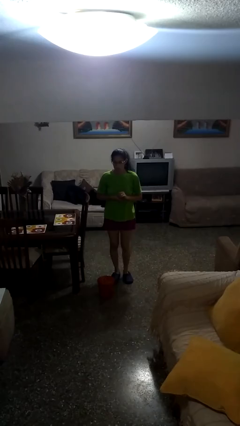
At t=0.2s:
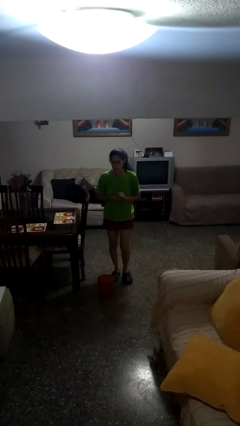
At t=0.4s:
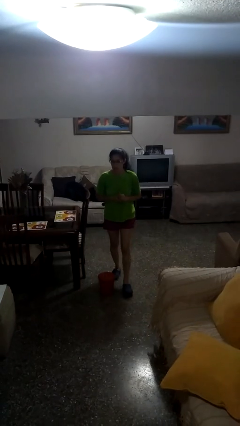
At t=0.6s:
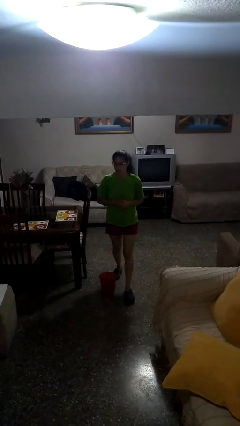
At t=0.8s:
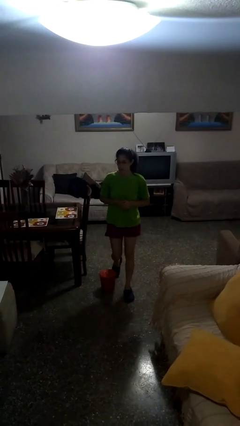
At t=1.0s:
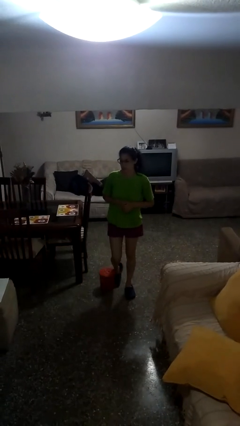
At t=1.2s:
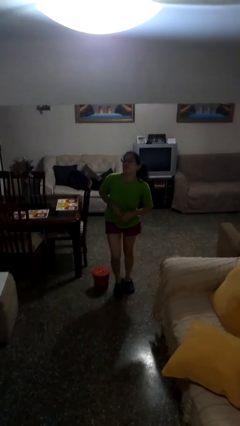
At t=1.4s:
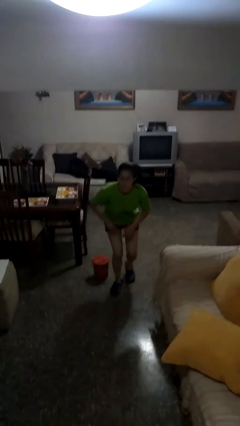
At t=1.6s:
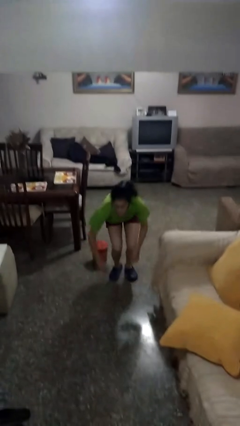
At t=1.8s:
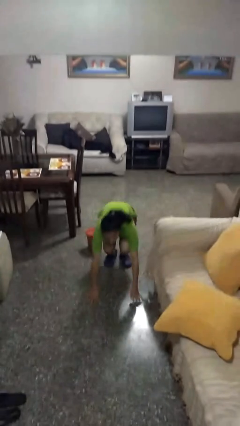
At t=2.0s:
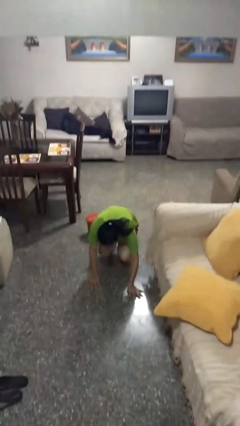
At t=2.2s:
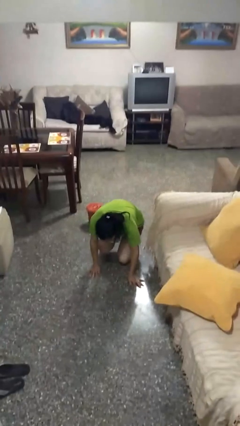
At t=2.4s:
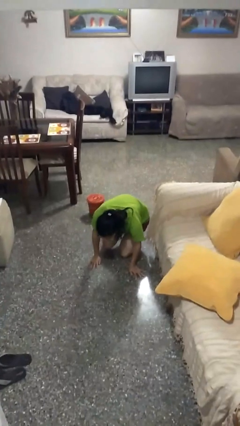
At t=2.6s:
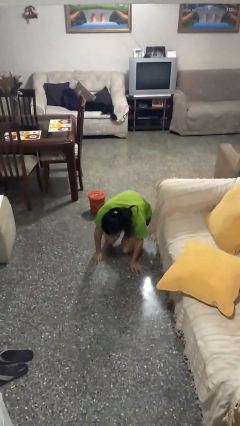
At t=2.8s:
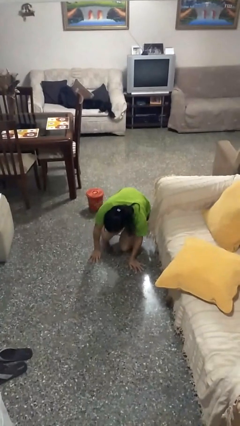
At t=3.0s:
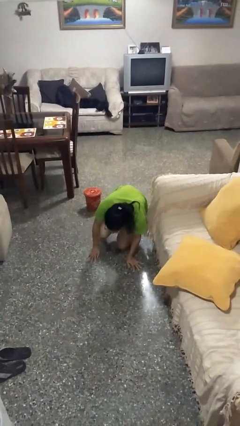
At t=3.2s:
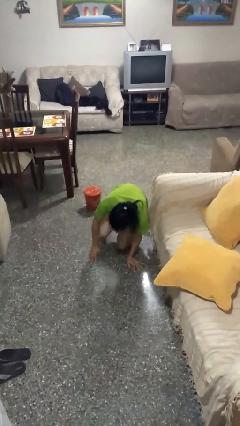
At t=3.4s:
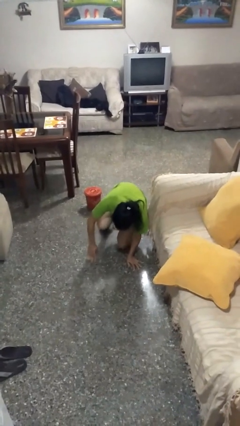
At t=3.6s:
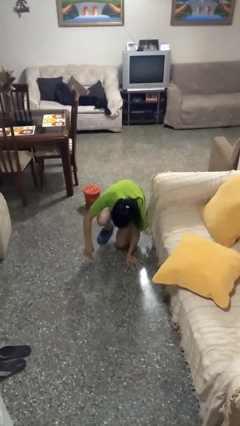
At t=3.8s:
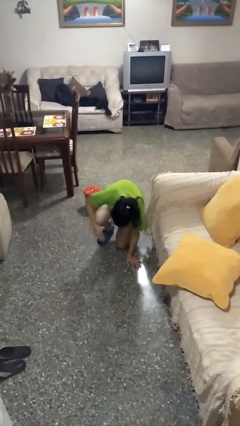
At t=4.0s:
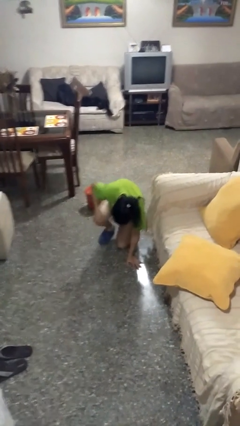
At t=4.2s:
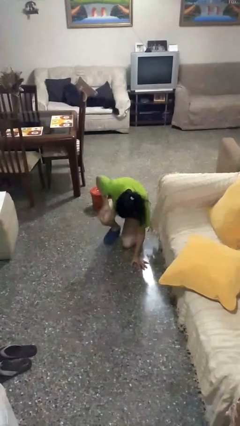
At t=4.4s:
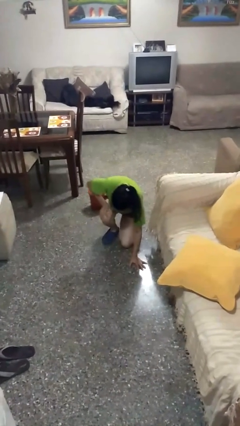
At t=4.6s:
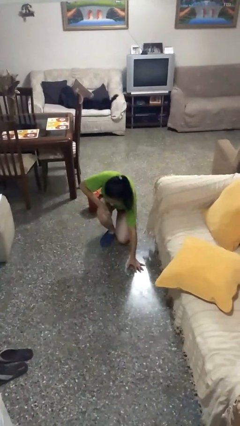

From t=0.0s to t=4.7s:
person trips on object on floor

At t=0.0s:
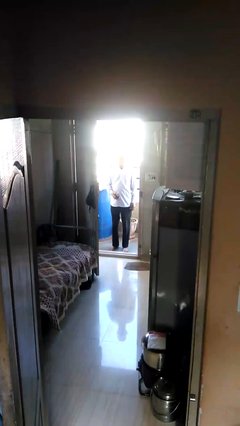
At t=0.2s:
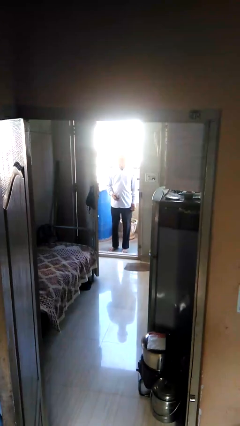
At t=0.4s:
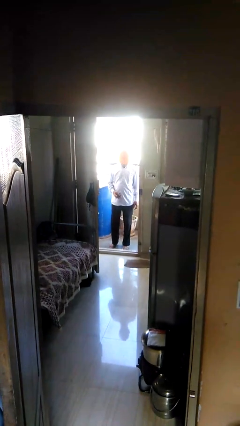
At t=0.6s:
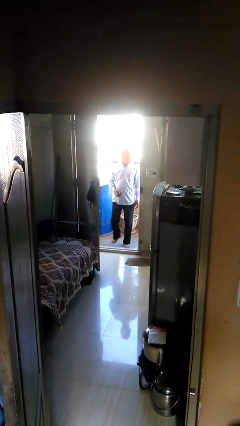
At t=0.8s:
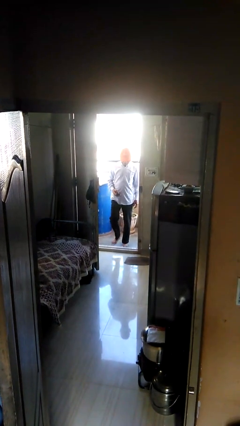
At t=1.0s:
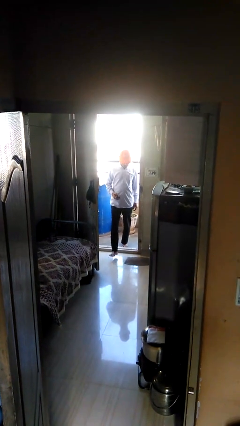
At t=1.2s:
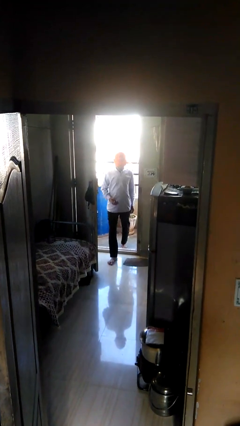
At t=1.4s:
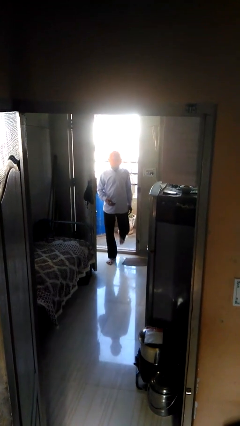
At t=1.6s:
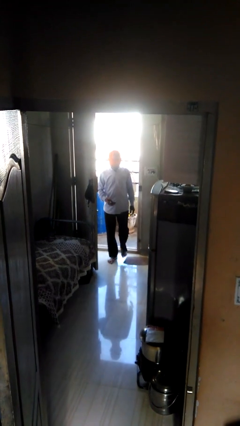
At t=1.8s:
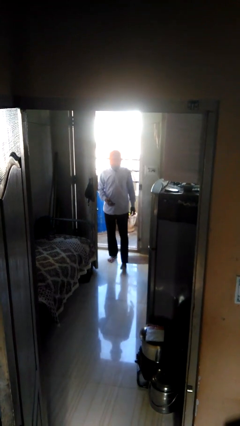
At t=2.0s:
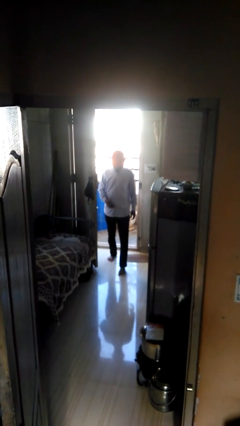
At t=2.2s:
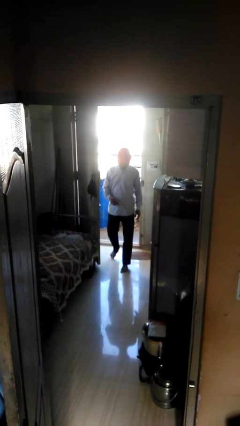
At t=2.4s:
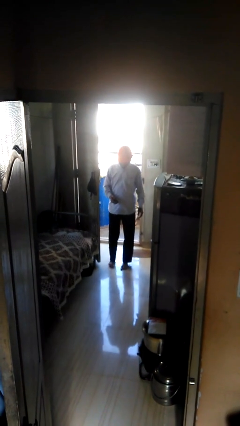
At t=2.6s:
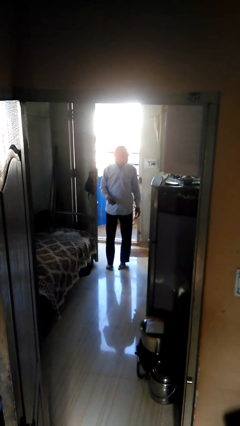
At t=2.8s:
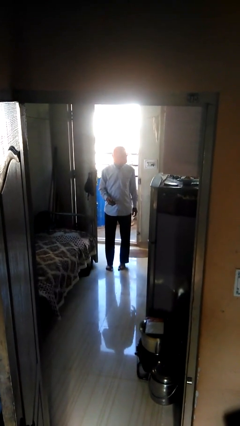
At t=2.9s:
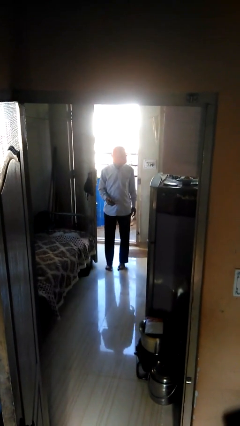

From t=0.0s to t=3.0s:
person enters scene through structure

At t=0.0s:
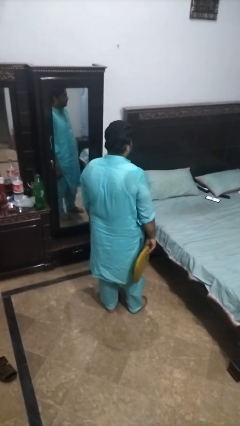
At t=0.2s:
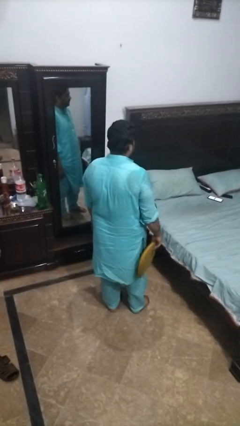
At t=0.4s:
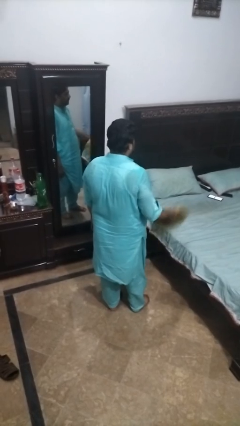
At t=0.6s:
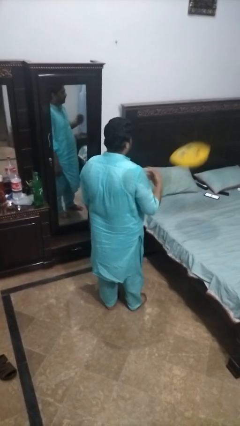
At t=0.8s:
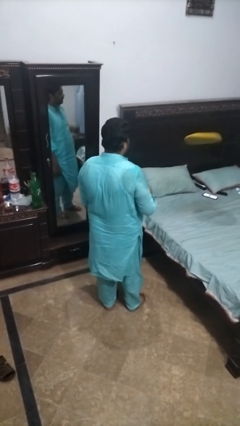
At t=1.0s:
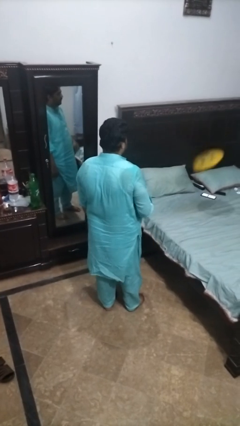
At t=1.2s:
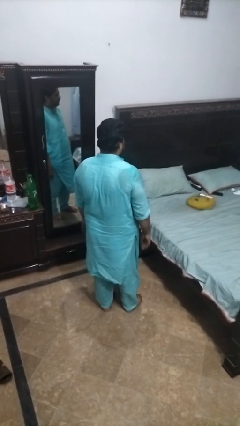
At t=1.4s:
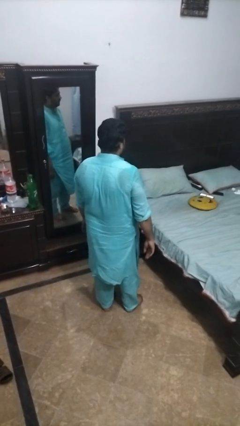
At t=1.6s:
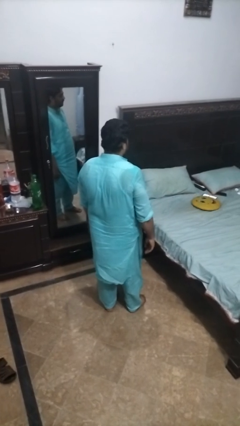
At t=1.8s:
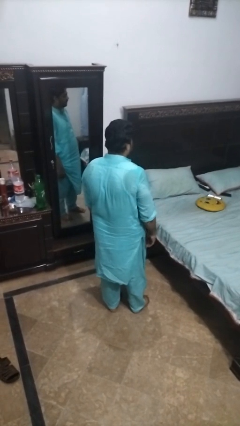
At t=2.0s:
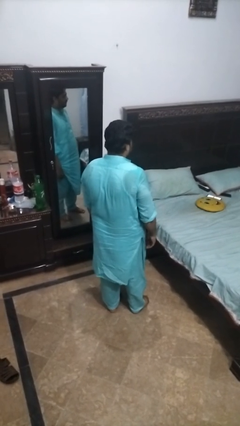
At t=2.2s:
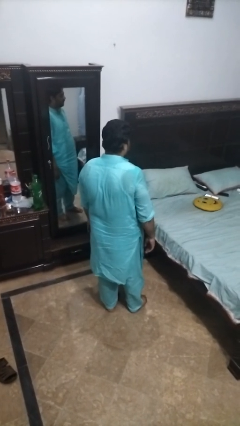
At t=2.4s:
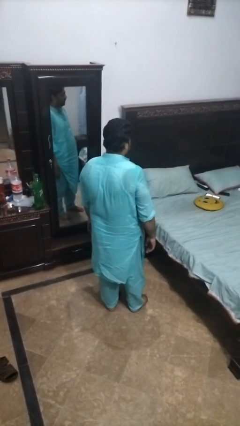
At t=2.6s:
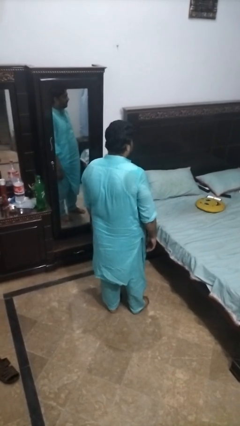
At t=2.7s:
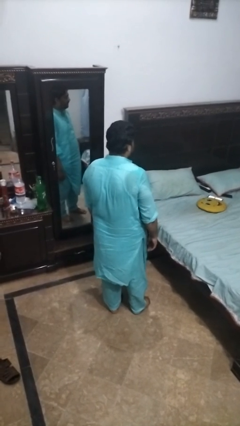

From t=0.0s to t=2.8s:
person throws object on bed

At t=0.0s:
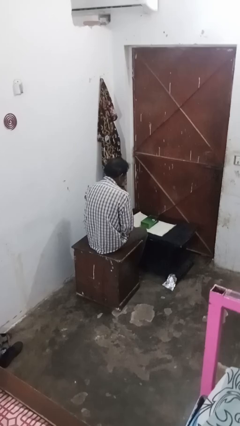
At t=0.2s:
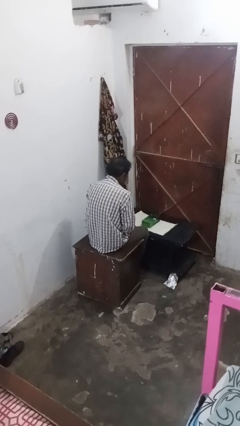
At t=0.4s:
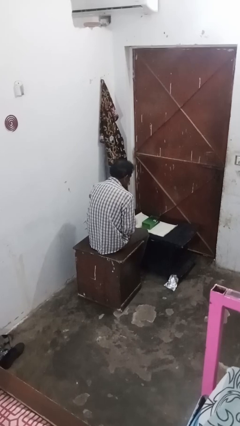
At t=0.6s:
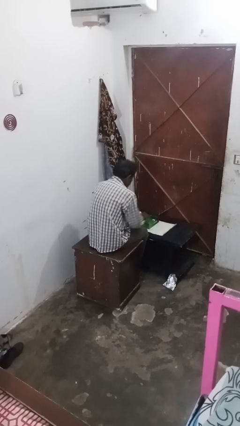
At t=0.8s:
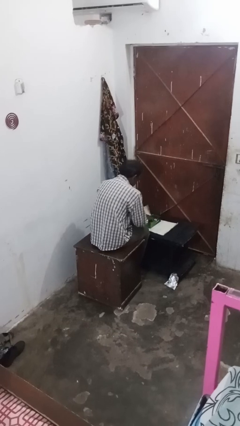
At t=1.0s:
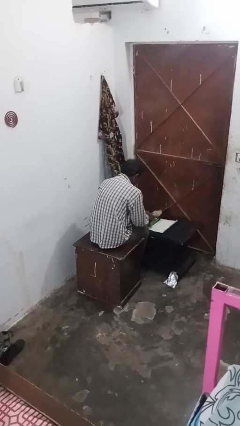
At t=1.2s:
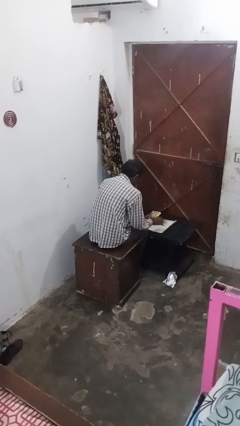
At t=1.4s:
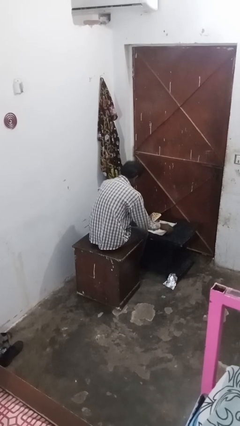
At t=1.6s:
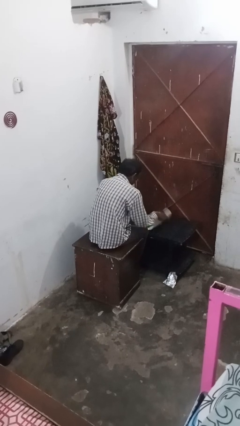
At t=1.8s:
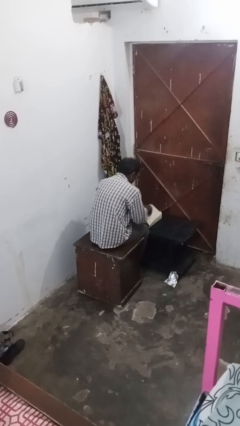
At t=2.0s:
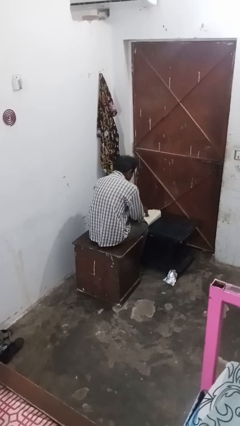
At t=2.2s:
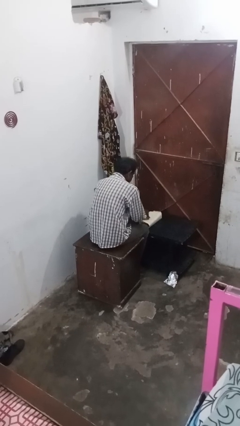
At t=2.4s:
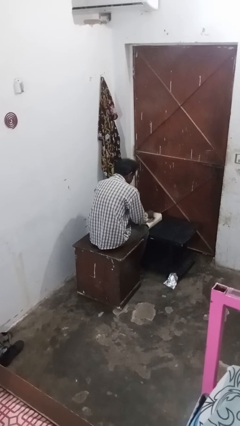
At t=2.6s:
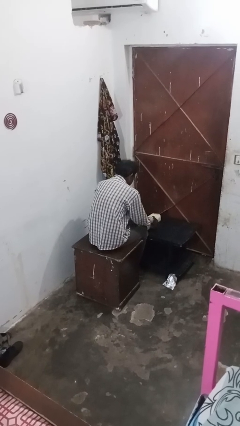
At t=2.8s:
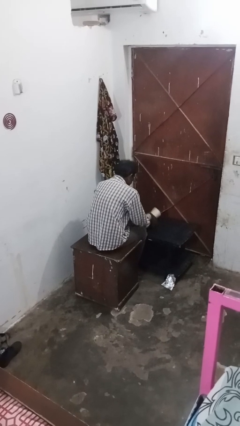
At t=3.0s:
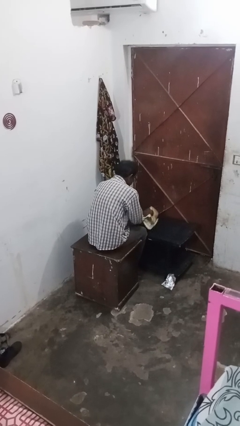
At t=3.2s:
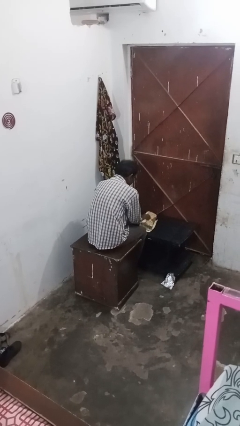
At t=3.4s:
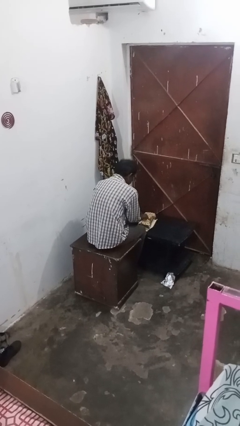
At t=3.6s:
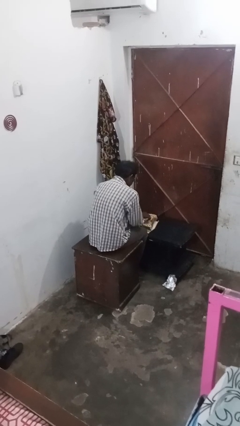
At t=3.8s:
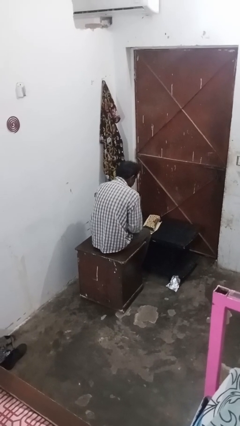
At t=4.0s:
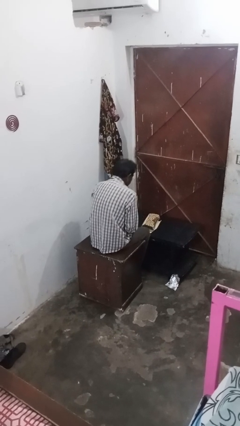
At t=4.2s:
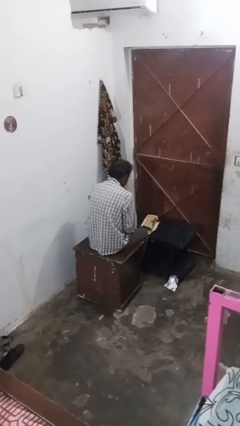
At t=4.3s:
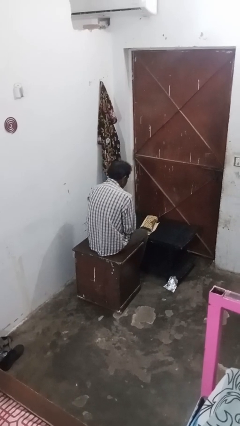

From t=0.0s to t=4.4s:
person wraps box

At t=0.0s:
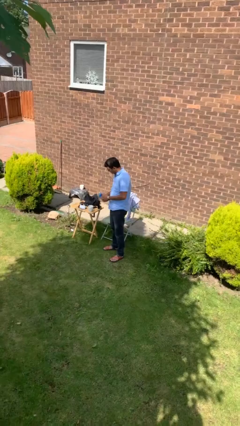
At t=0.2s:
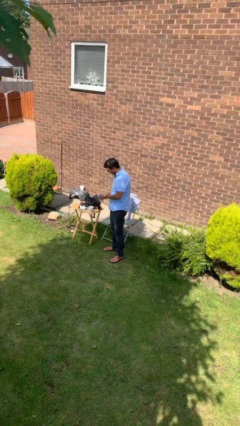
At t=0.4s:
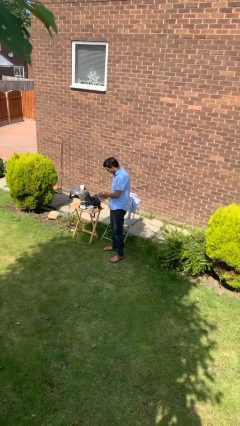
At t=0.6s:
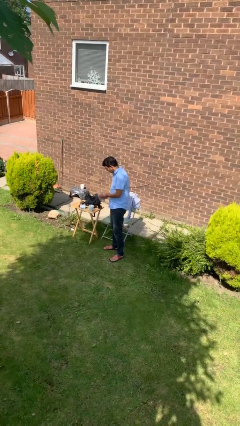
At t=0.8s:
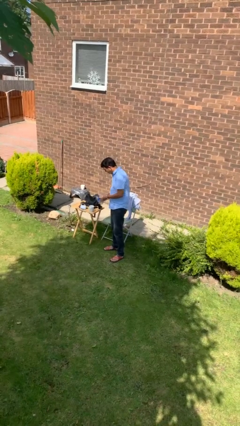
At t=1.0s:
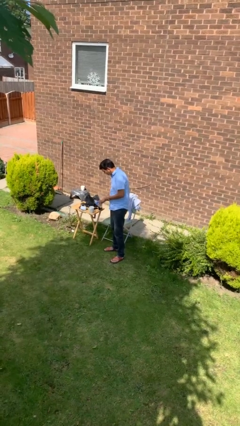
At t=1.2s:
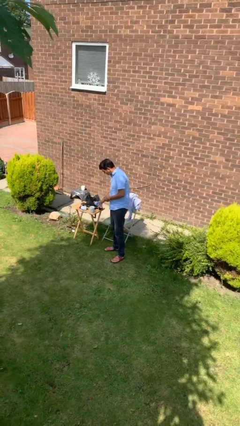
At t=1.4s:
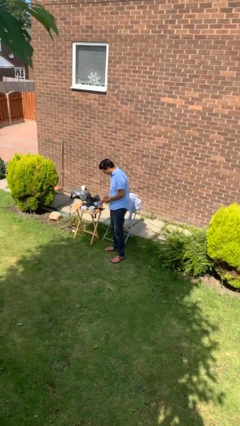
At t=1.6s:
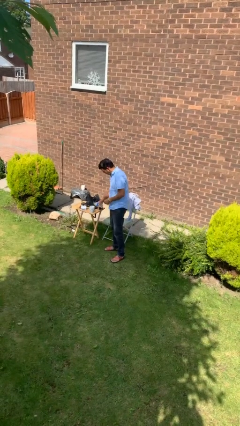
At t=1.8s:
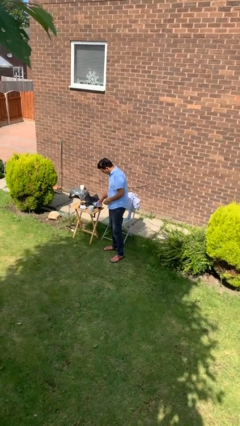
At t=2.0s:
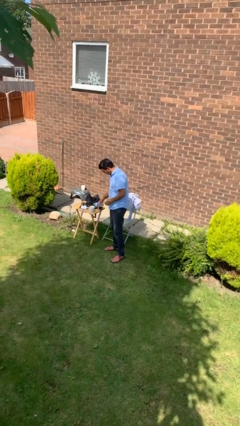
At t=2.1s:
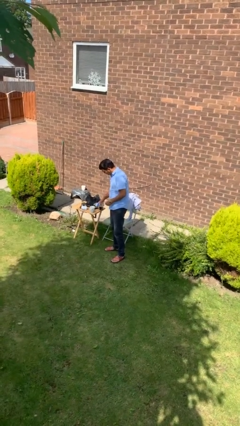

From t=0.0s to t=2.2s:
person unscrews lid from bottle
